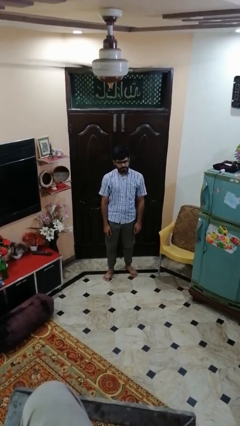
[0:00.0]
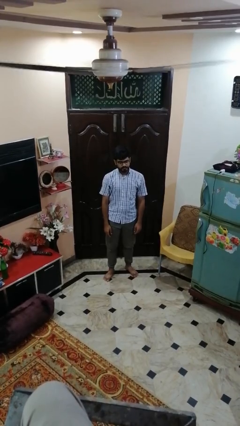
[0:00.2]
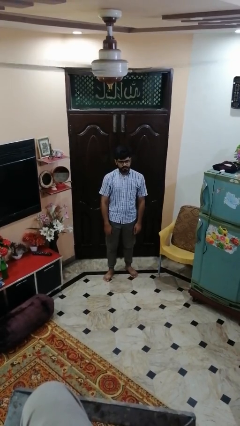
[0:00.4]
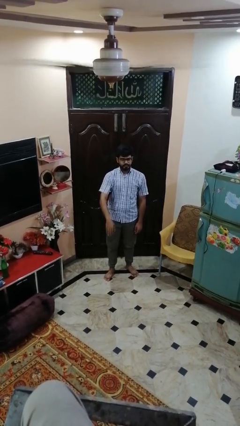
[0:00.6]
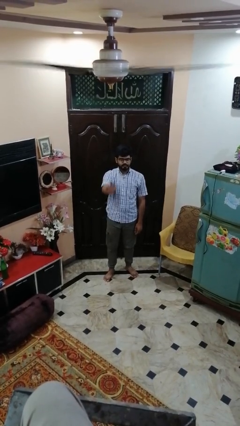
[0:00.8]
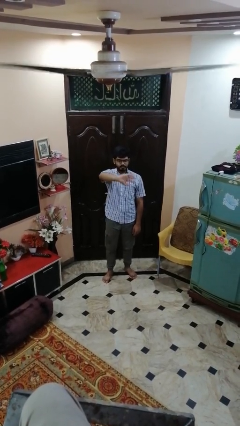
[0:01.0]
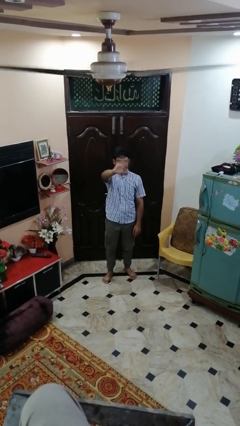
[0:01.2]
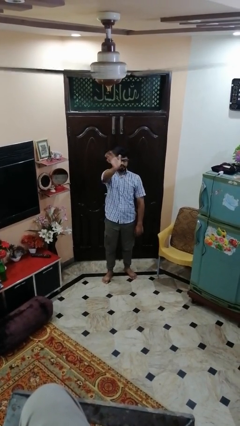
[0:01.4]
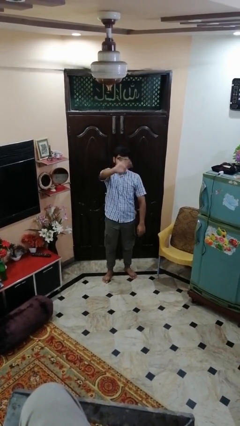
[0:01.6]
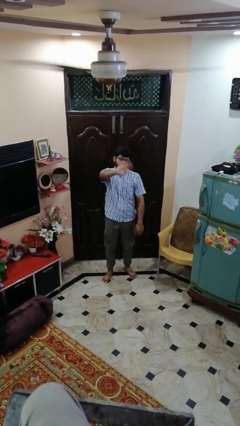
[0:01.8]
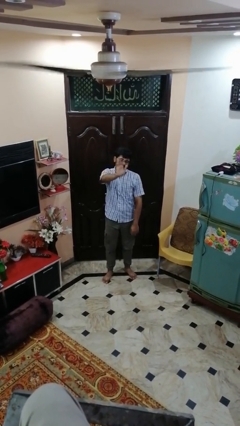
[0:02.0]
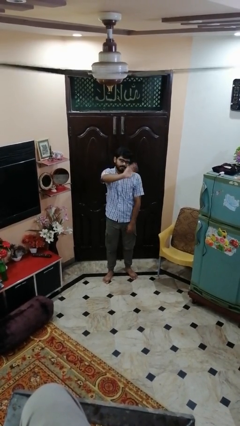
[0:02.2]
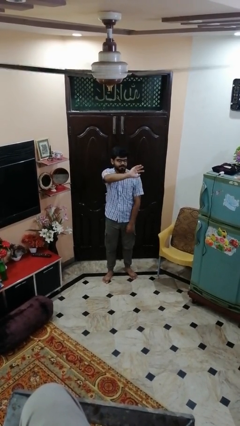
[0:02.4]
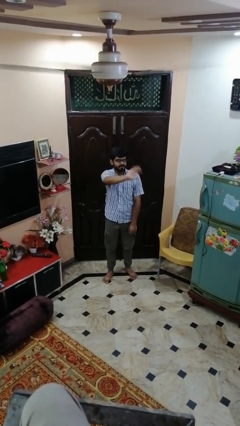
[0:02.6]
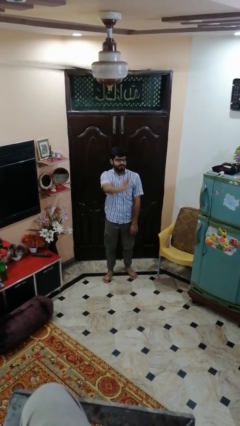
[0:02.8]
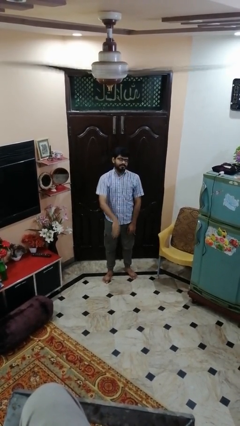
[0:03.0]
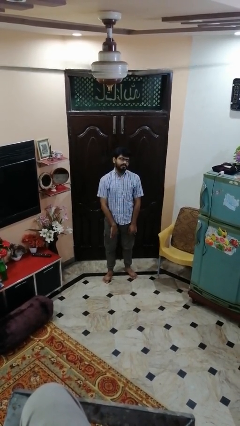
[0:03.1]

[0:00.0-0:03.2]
person waves at person

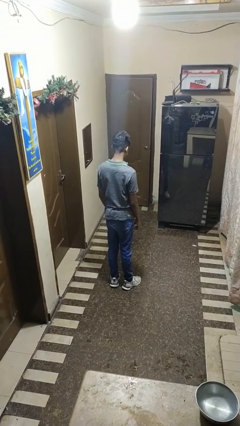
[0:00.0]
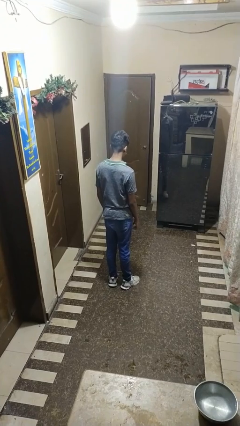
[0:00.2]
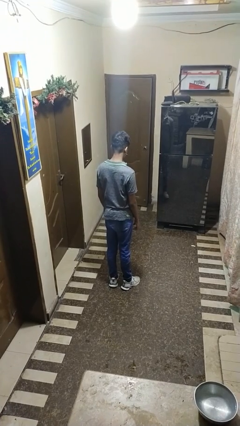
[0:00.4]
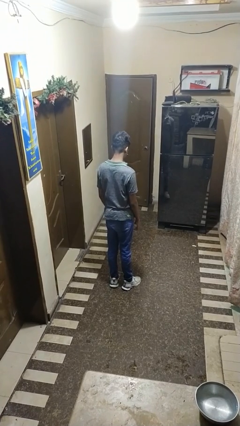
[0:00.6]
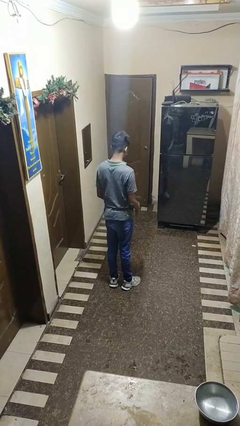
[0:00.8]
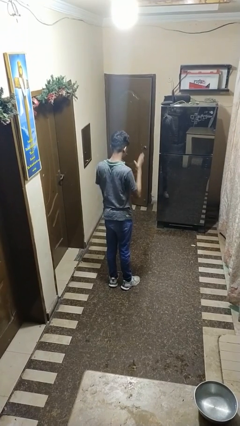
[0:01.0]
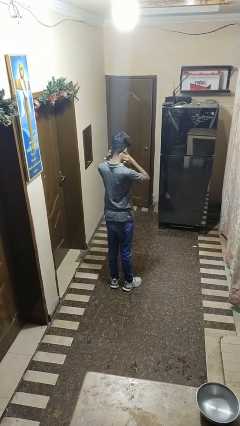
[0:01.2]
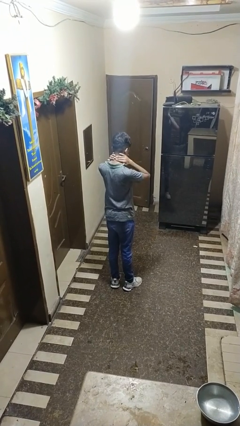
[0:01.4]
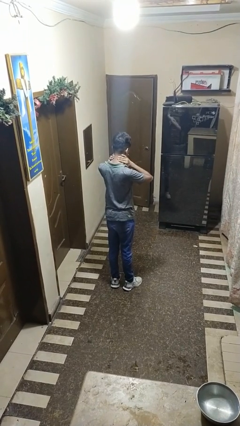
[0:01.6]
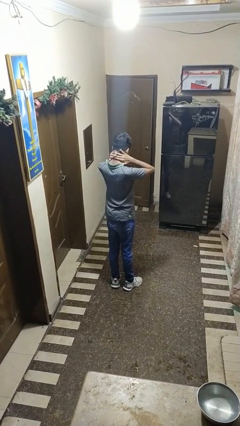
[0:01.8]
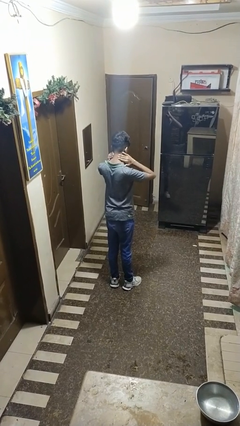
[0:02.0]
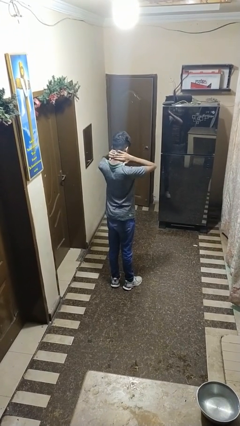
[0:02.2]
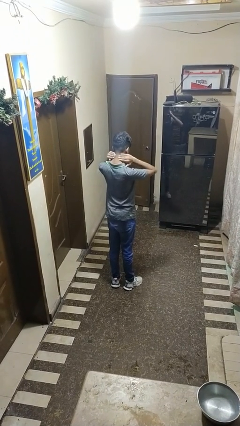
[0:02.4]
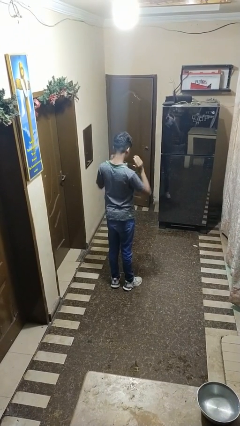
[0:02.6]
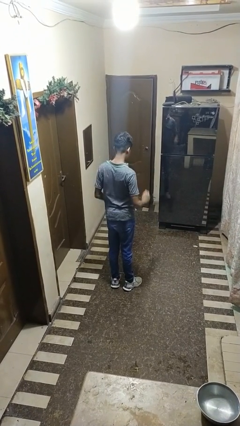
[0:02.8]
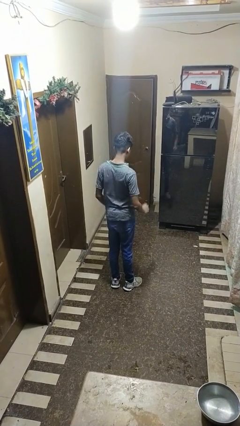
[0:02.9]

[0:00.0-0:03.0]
person rubs neck

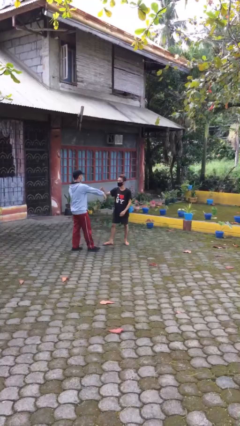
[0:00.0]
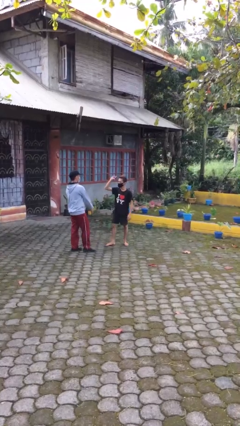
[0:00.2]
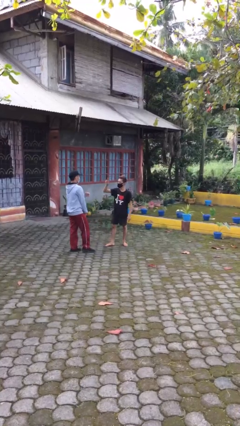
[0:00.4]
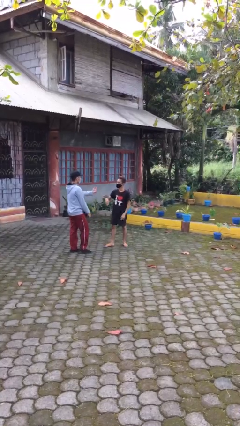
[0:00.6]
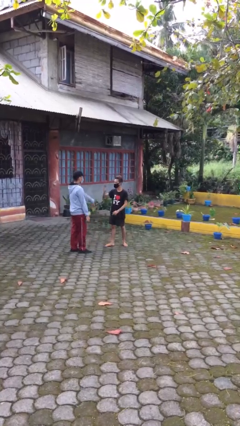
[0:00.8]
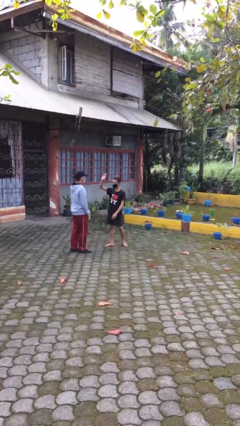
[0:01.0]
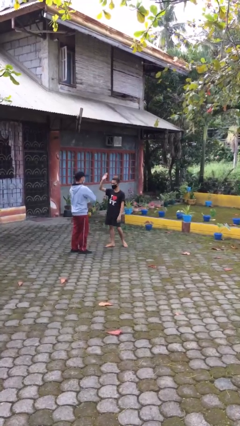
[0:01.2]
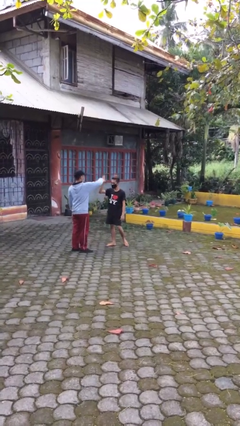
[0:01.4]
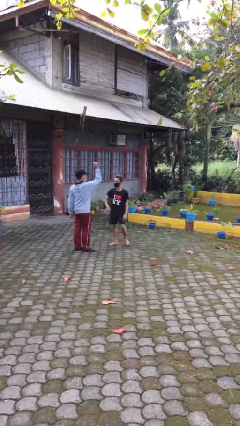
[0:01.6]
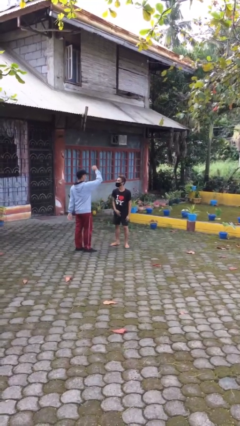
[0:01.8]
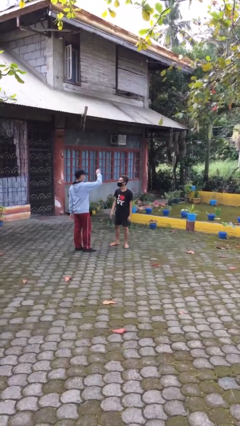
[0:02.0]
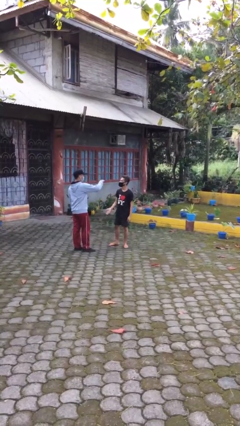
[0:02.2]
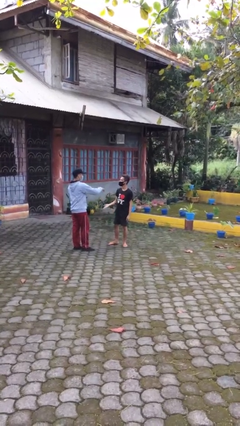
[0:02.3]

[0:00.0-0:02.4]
person talks to person

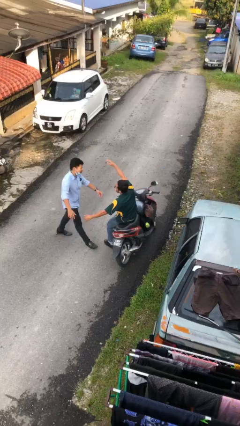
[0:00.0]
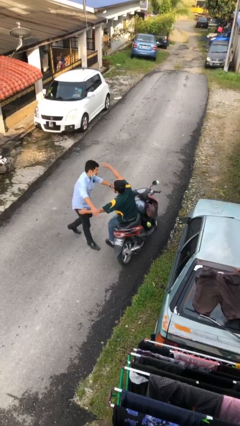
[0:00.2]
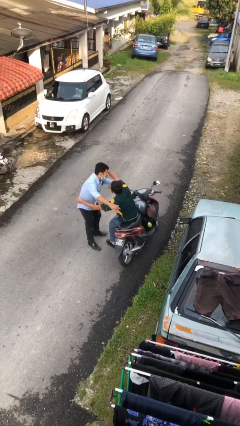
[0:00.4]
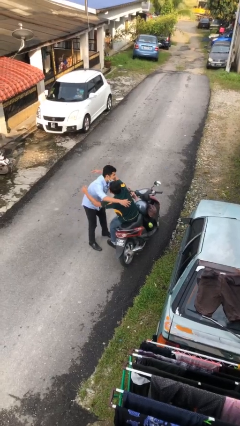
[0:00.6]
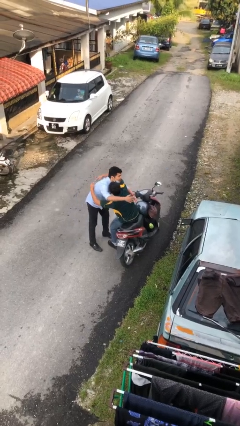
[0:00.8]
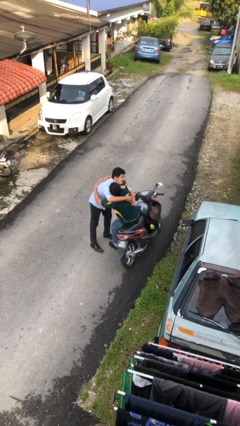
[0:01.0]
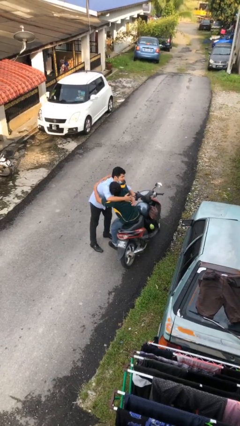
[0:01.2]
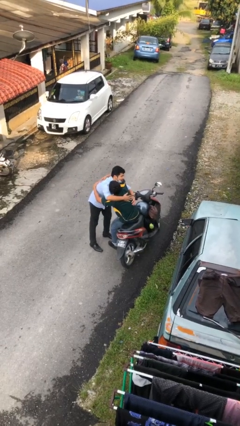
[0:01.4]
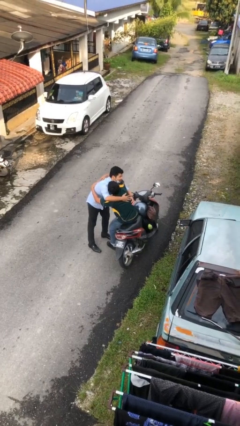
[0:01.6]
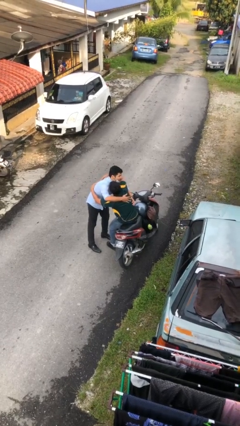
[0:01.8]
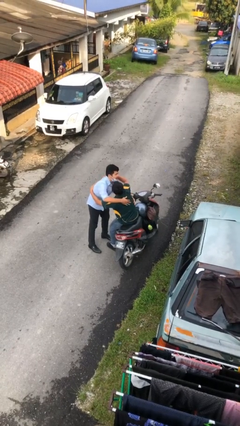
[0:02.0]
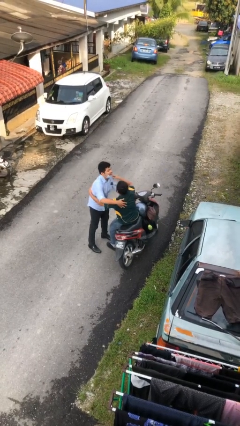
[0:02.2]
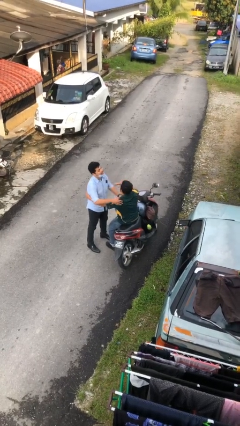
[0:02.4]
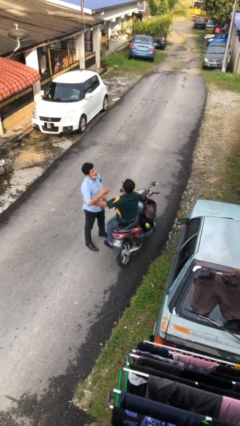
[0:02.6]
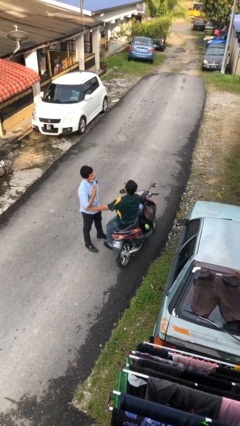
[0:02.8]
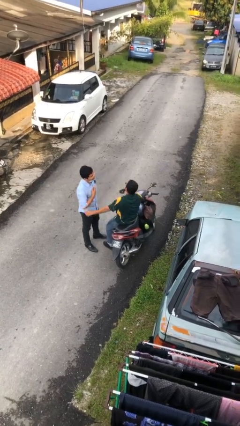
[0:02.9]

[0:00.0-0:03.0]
person embraces person

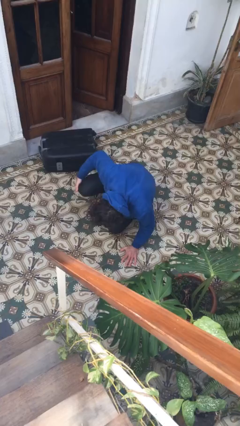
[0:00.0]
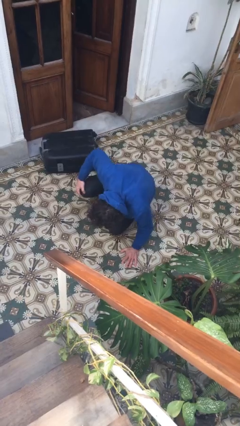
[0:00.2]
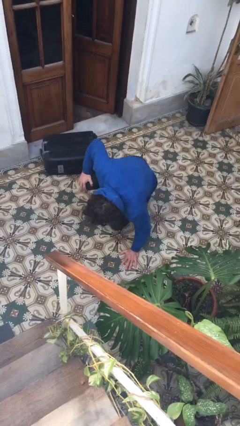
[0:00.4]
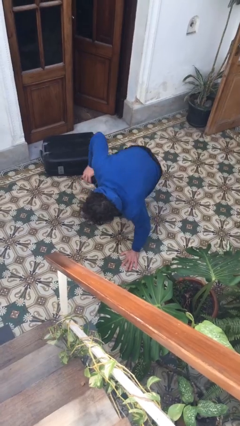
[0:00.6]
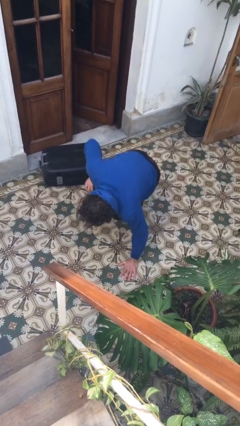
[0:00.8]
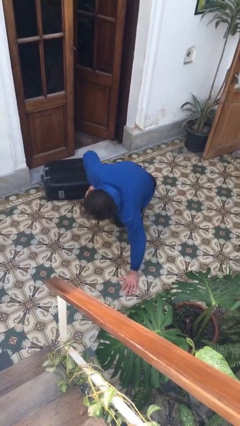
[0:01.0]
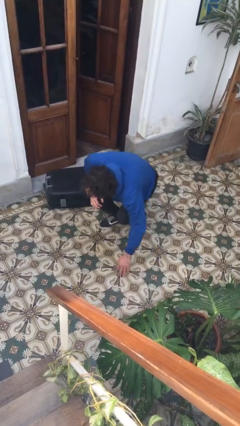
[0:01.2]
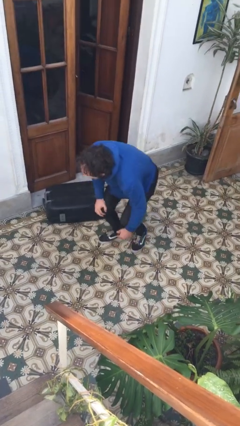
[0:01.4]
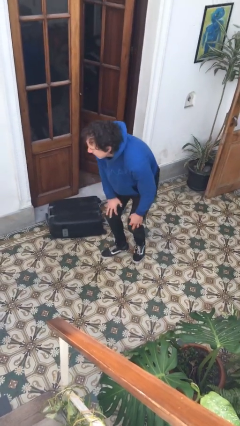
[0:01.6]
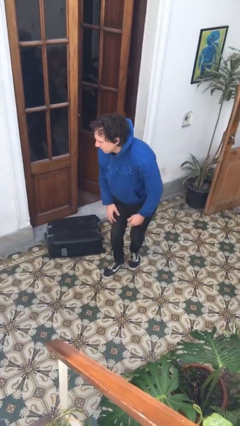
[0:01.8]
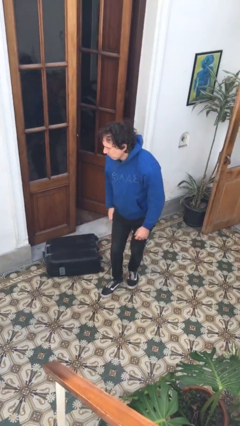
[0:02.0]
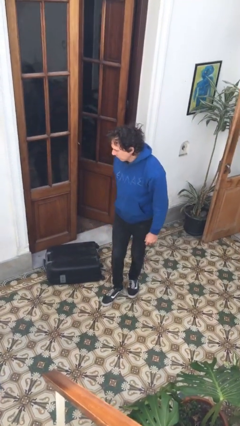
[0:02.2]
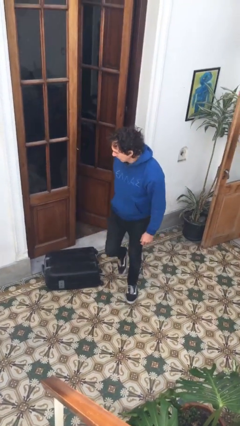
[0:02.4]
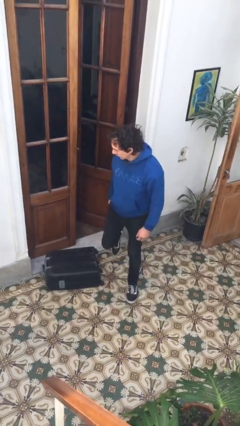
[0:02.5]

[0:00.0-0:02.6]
person stands up from floor

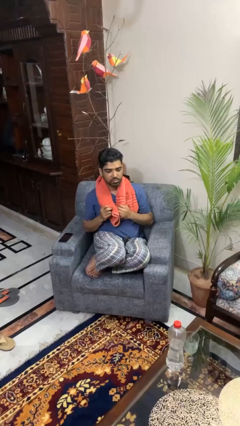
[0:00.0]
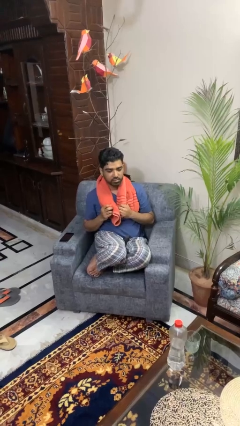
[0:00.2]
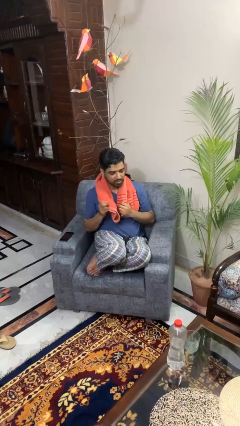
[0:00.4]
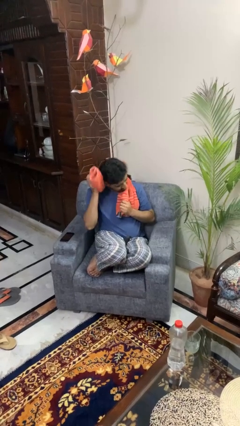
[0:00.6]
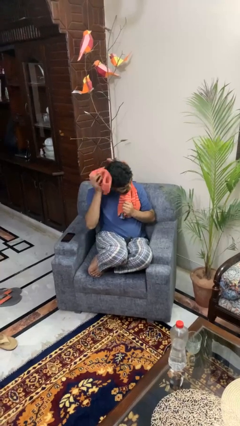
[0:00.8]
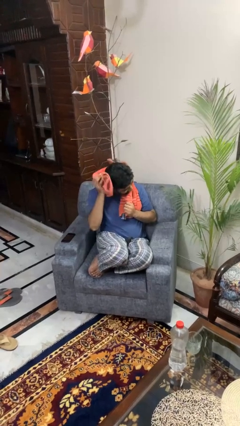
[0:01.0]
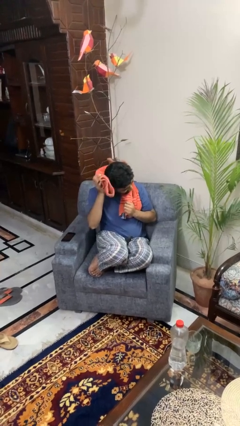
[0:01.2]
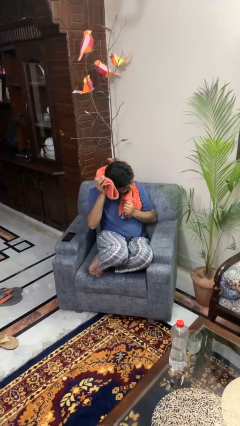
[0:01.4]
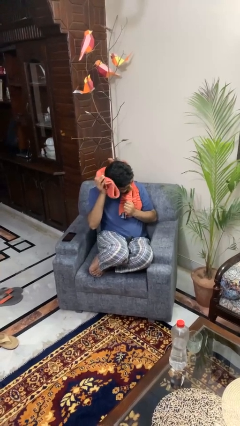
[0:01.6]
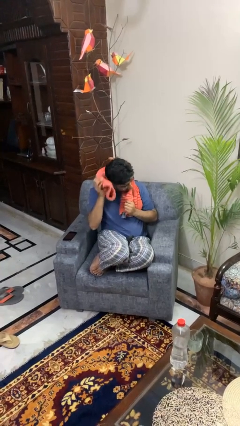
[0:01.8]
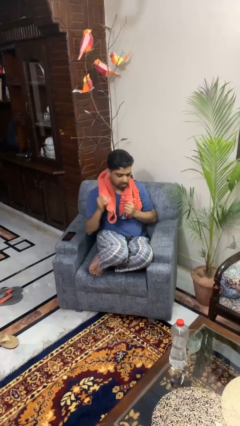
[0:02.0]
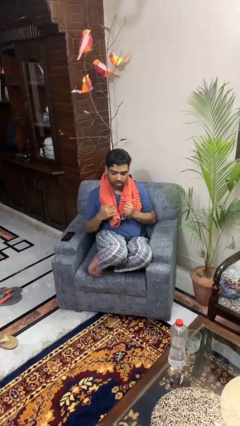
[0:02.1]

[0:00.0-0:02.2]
person dries hair with towel

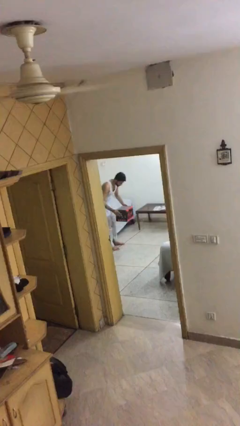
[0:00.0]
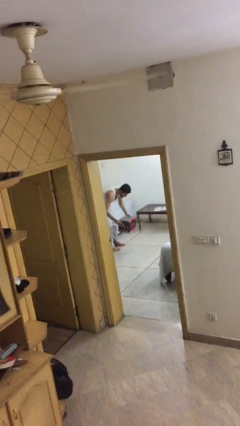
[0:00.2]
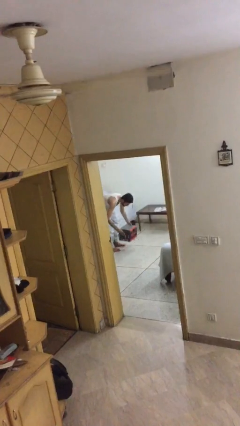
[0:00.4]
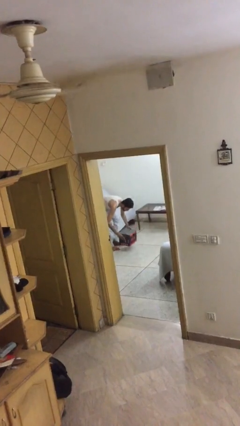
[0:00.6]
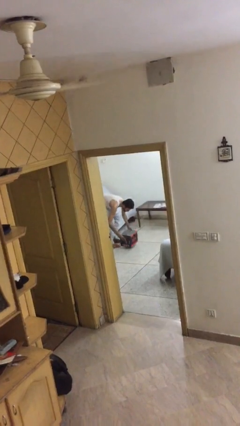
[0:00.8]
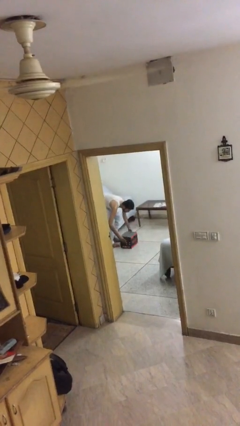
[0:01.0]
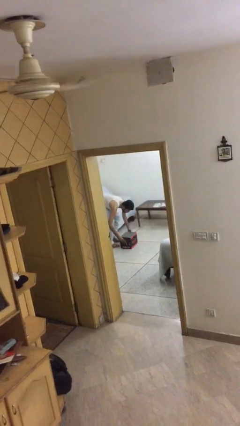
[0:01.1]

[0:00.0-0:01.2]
person puts down object on floor
